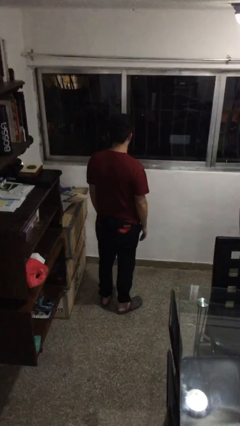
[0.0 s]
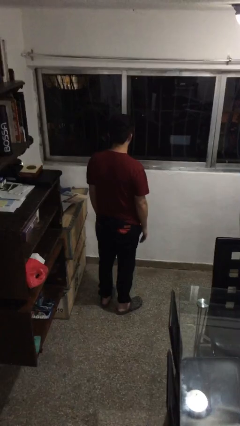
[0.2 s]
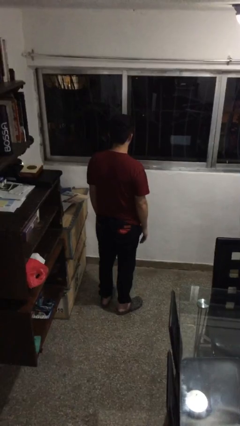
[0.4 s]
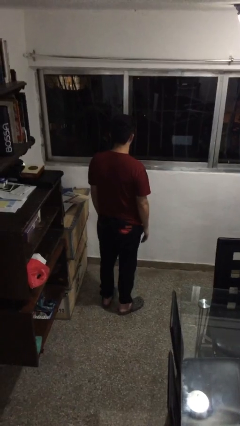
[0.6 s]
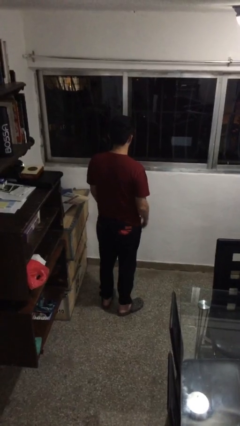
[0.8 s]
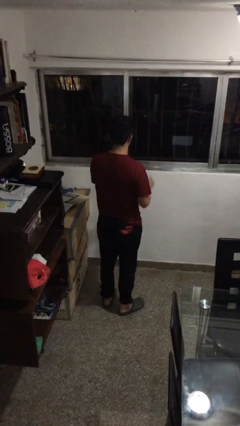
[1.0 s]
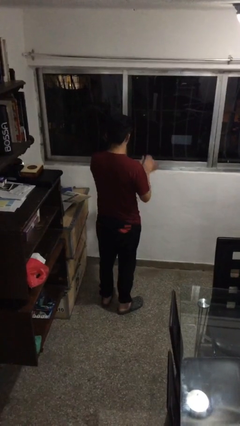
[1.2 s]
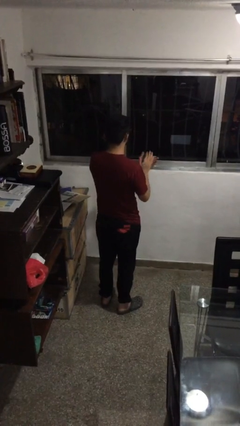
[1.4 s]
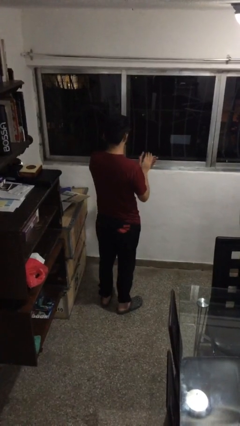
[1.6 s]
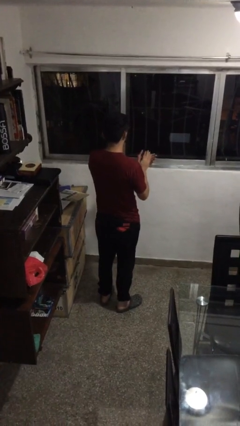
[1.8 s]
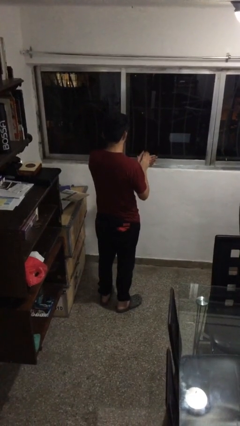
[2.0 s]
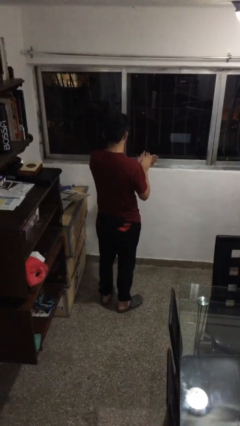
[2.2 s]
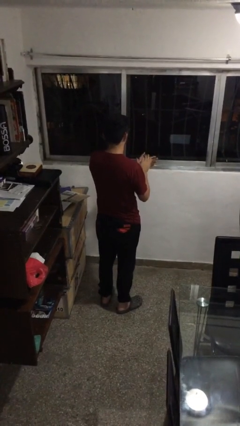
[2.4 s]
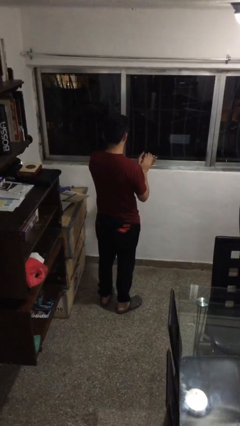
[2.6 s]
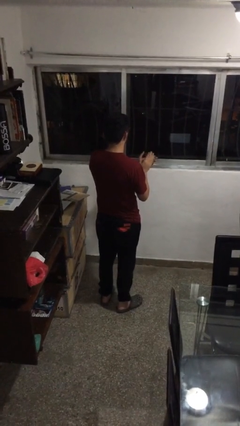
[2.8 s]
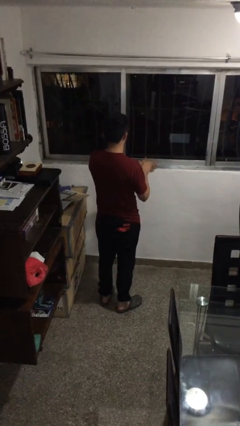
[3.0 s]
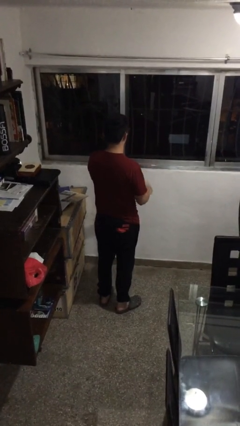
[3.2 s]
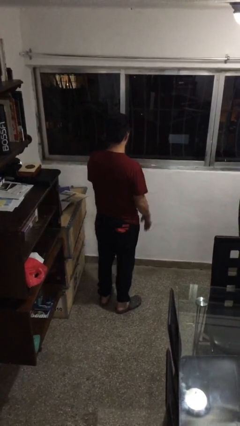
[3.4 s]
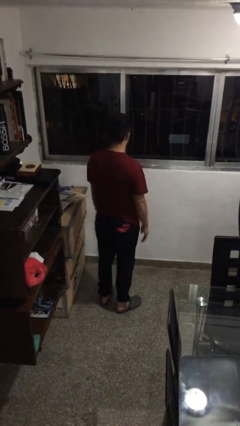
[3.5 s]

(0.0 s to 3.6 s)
person claps hands

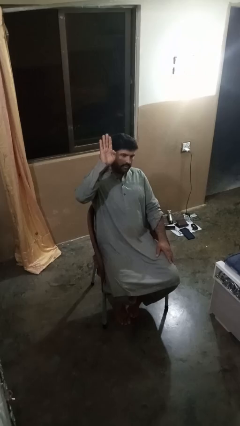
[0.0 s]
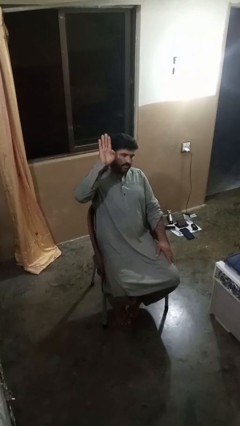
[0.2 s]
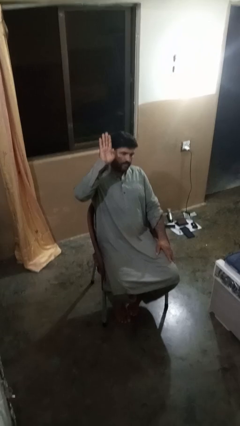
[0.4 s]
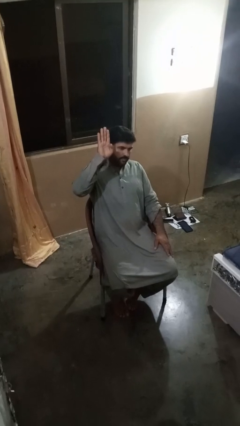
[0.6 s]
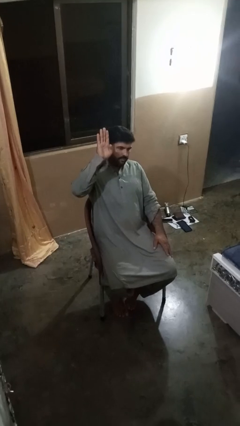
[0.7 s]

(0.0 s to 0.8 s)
person gestures number four

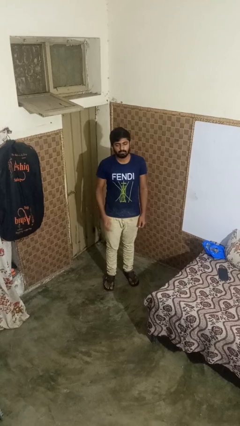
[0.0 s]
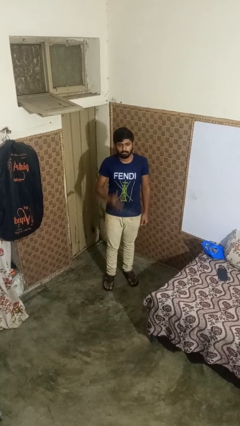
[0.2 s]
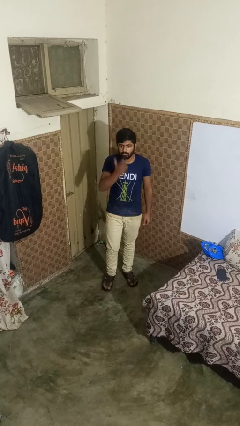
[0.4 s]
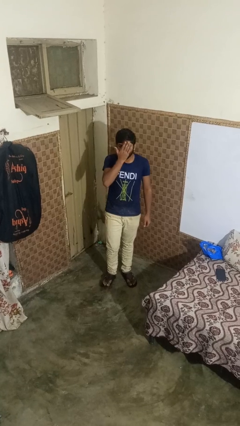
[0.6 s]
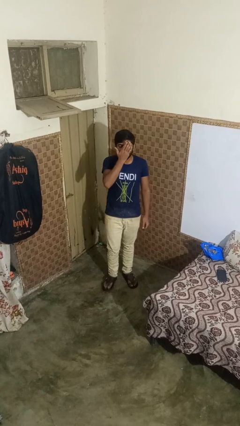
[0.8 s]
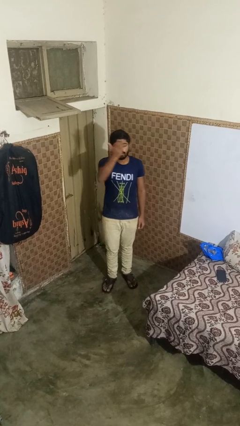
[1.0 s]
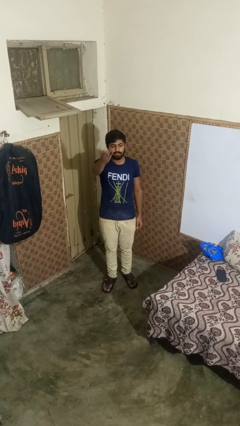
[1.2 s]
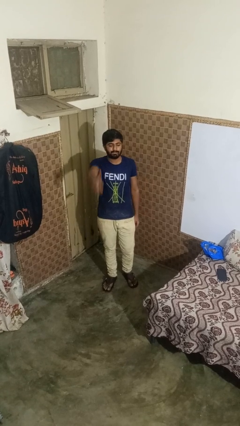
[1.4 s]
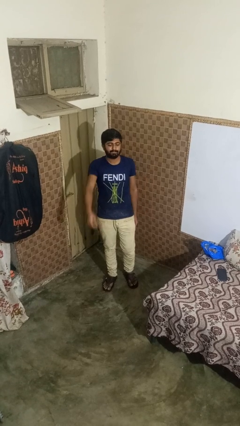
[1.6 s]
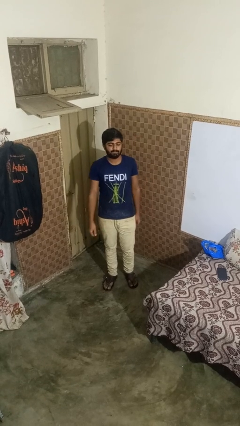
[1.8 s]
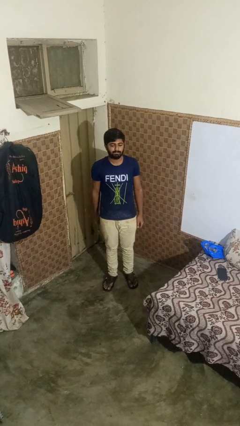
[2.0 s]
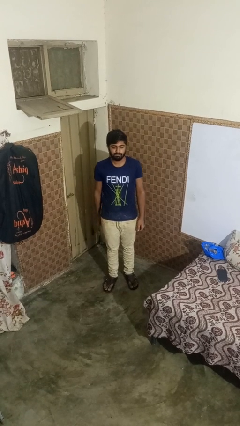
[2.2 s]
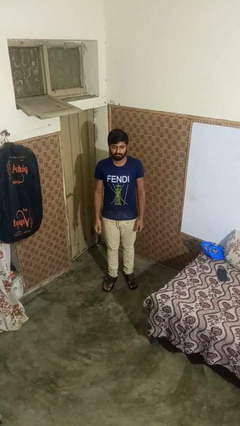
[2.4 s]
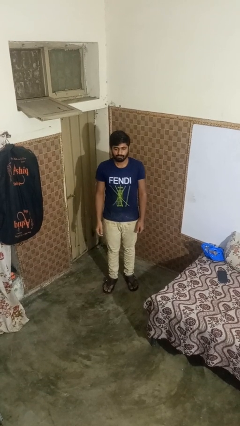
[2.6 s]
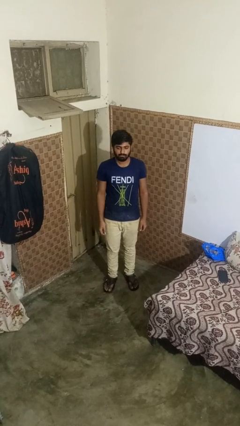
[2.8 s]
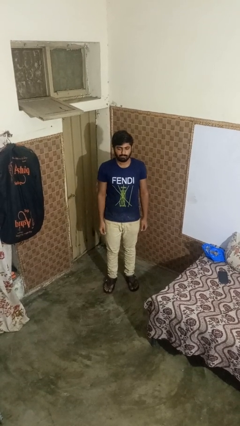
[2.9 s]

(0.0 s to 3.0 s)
person gestures blow kiss

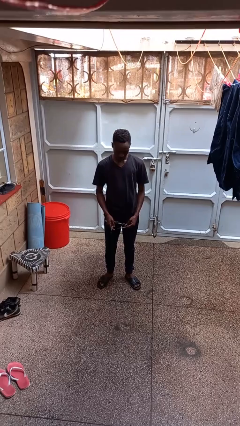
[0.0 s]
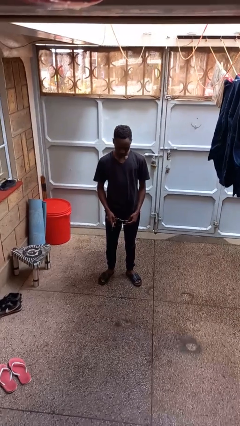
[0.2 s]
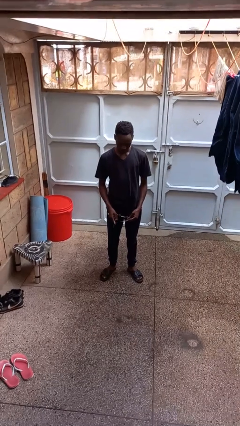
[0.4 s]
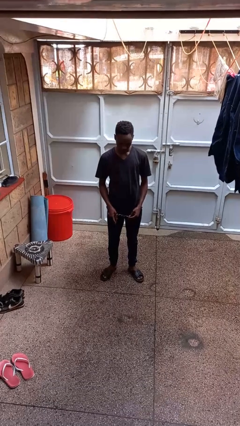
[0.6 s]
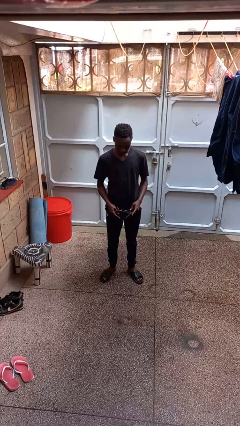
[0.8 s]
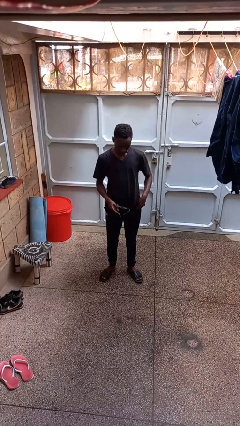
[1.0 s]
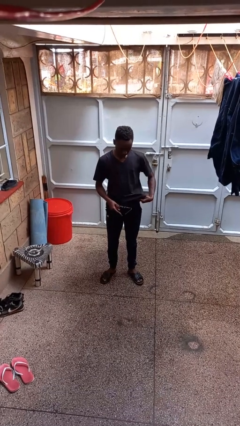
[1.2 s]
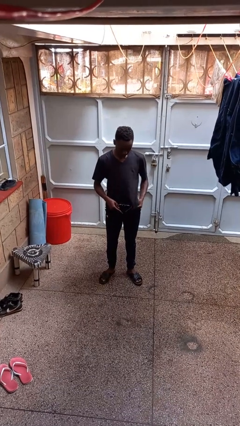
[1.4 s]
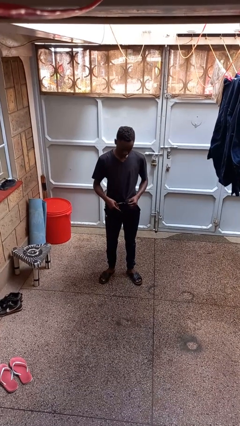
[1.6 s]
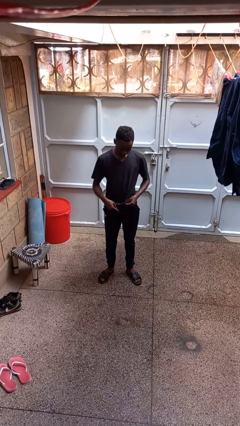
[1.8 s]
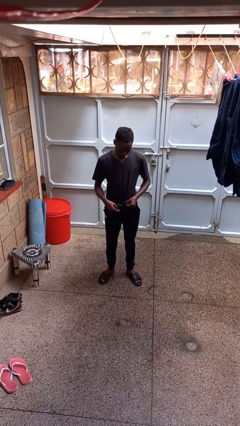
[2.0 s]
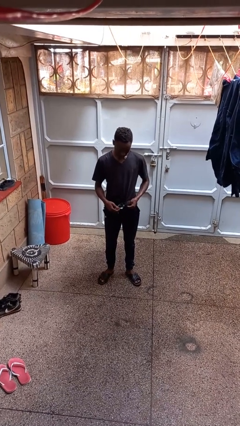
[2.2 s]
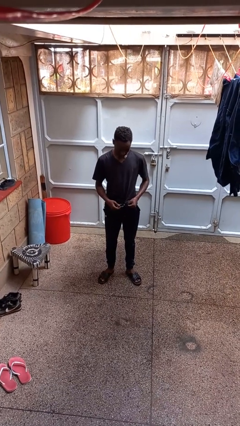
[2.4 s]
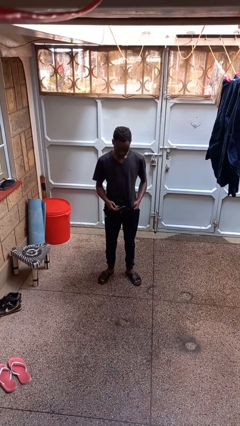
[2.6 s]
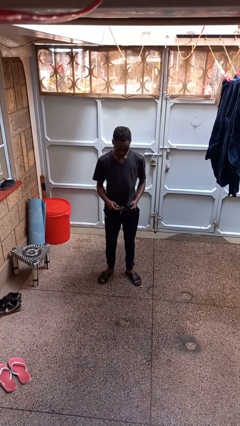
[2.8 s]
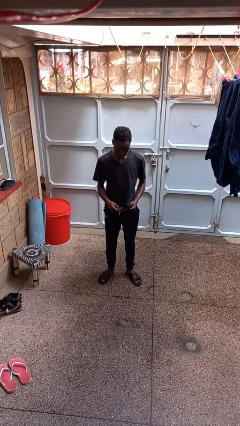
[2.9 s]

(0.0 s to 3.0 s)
person cleans eyeglasses

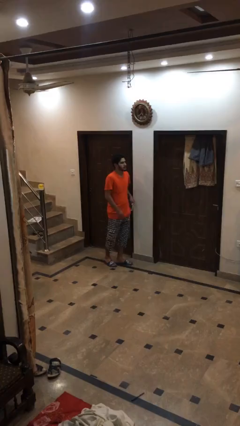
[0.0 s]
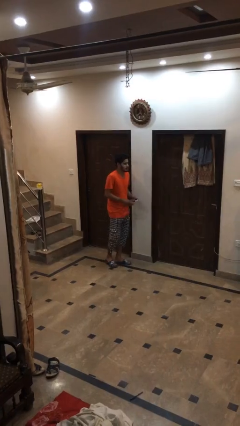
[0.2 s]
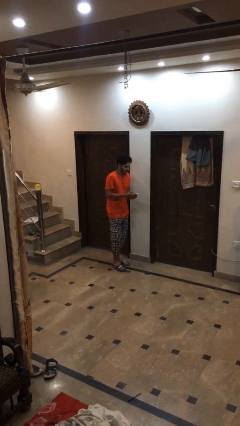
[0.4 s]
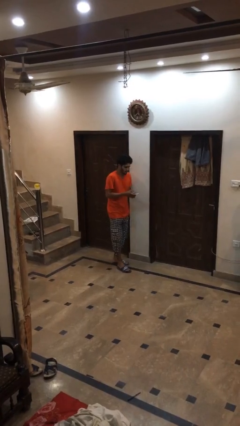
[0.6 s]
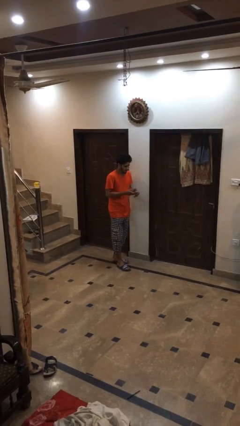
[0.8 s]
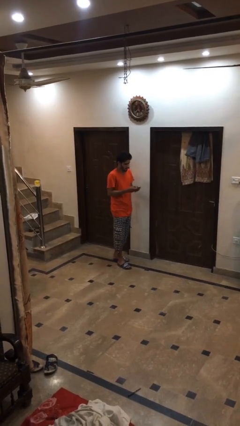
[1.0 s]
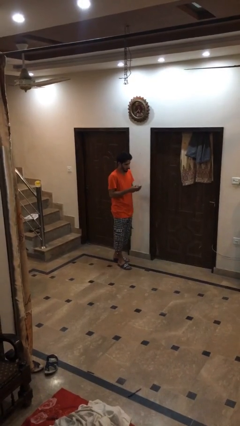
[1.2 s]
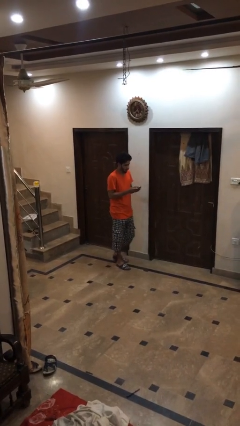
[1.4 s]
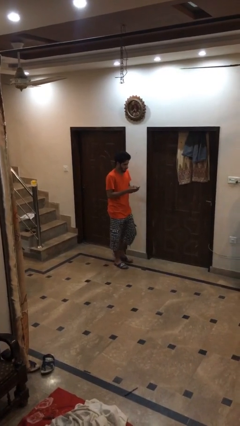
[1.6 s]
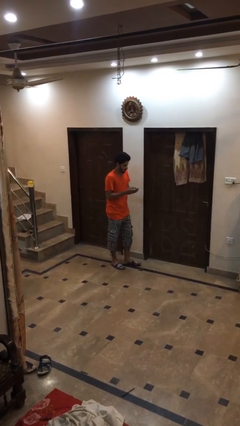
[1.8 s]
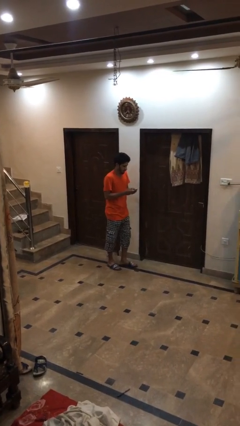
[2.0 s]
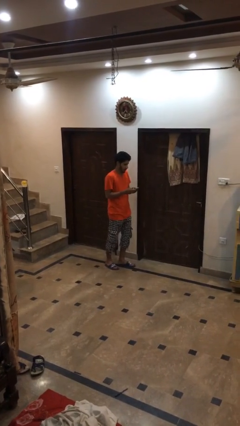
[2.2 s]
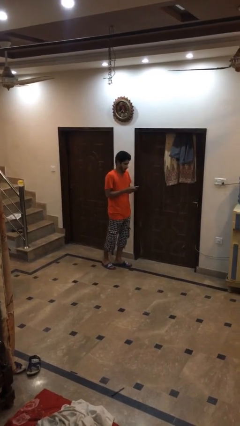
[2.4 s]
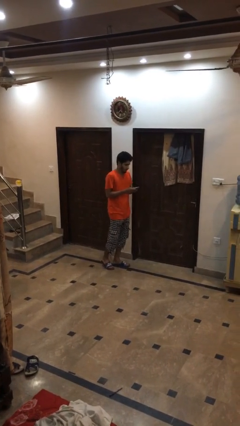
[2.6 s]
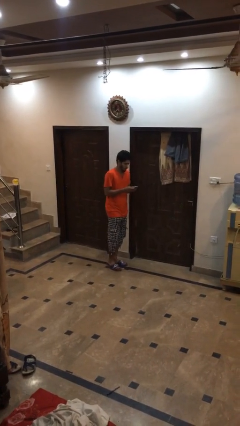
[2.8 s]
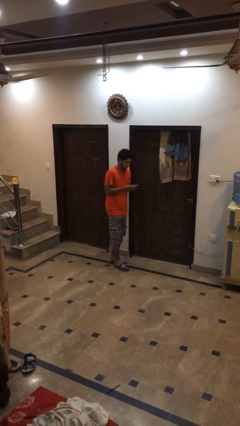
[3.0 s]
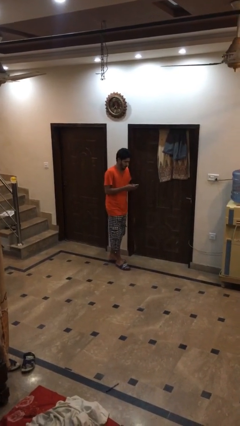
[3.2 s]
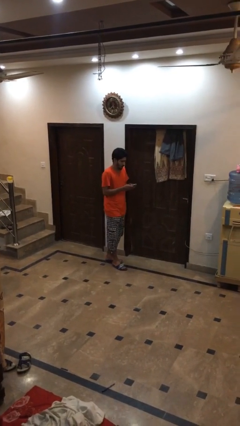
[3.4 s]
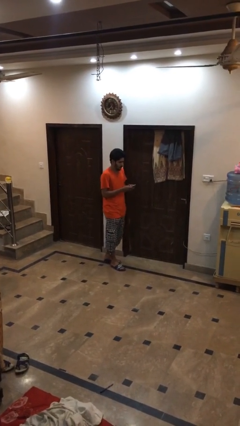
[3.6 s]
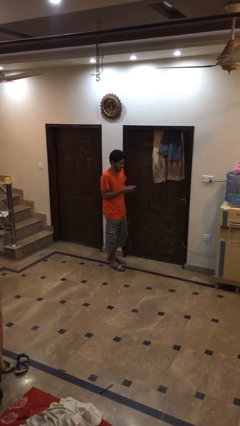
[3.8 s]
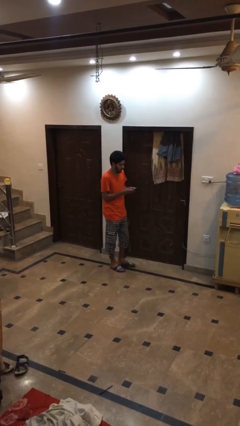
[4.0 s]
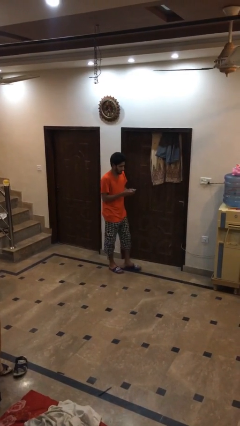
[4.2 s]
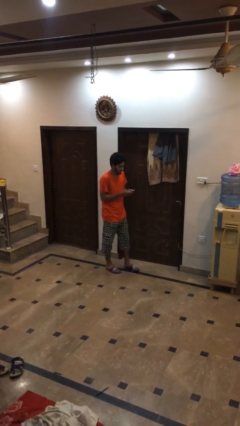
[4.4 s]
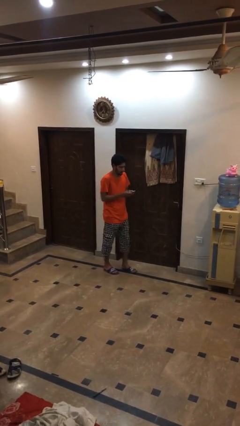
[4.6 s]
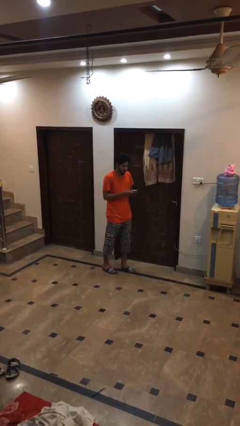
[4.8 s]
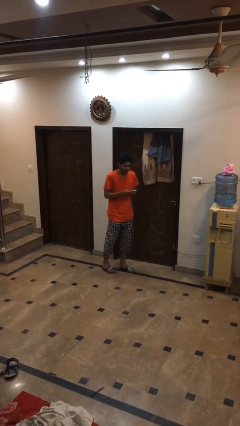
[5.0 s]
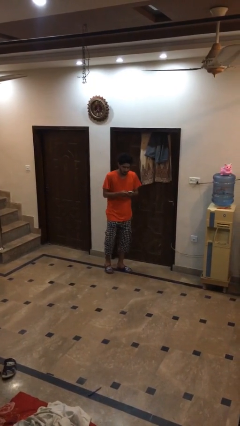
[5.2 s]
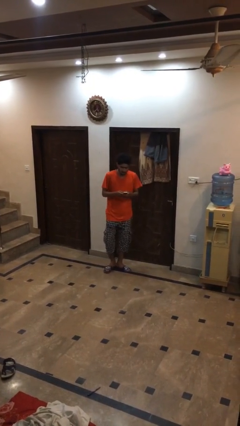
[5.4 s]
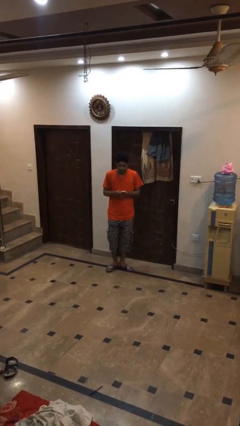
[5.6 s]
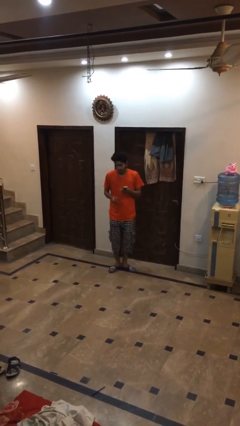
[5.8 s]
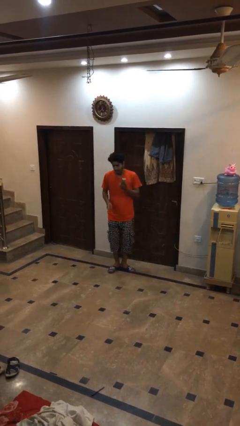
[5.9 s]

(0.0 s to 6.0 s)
person texts on phone

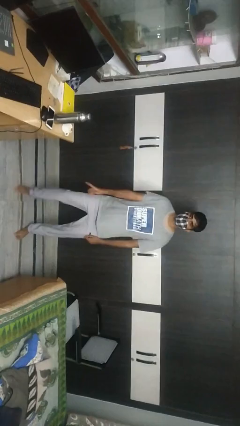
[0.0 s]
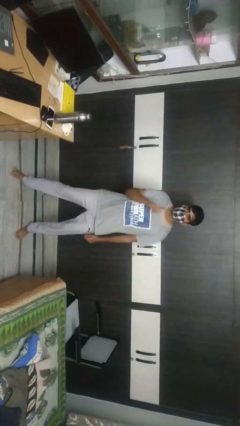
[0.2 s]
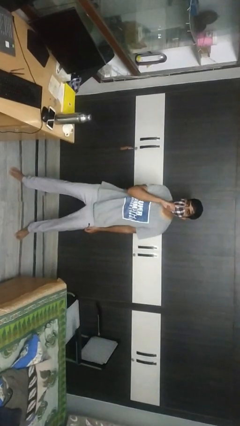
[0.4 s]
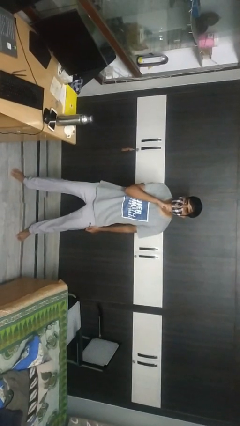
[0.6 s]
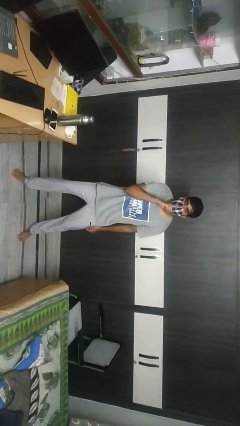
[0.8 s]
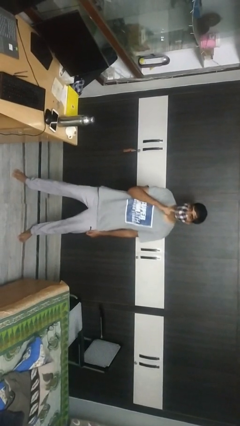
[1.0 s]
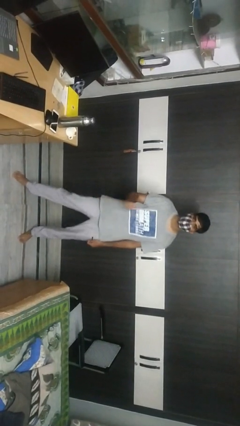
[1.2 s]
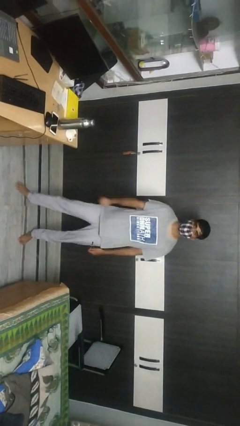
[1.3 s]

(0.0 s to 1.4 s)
person gestures be quiet
